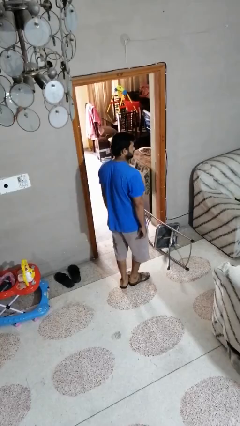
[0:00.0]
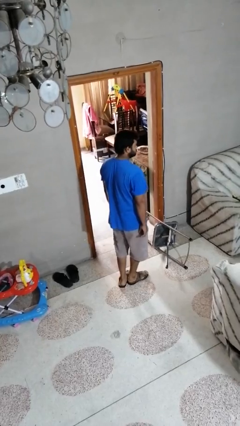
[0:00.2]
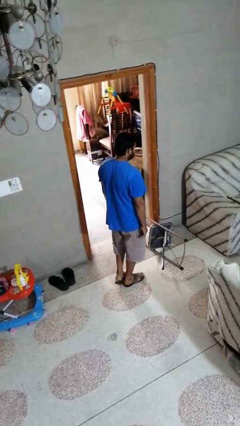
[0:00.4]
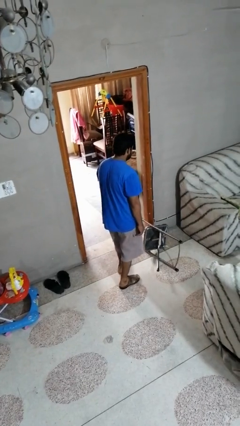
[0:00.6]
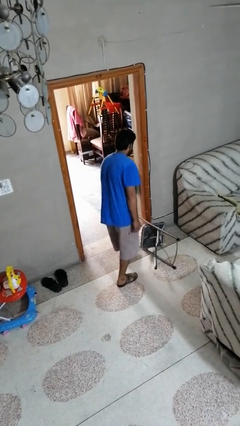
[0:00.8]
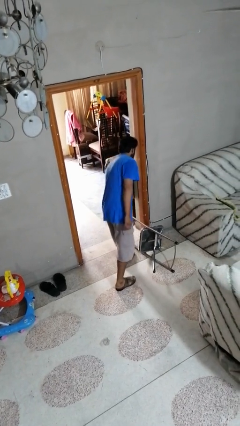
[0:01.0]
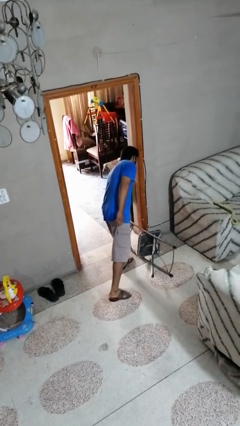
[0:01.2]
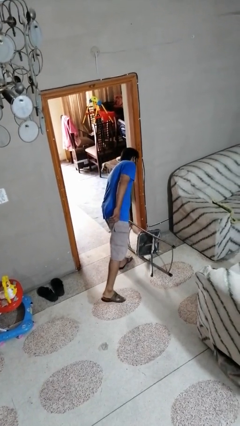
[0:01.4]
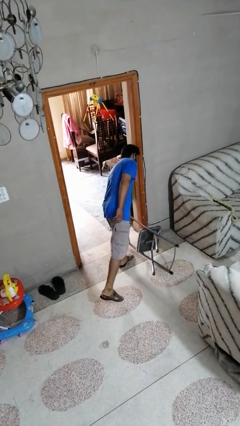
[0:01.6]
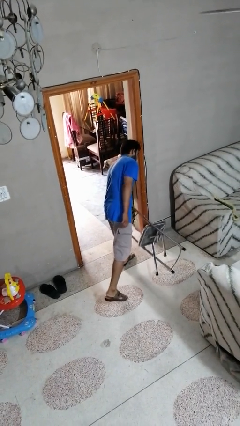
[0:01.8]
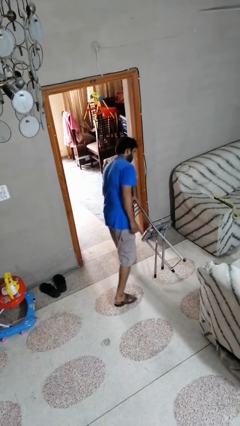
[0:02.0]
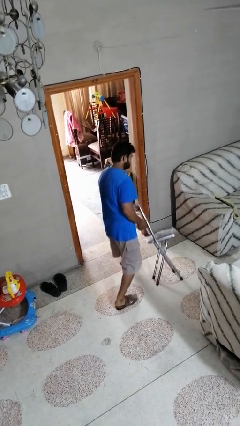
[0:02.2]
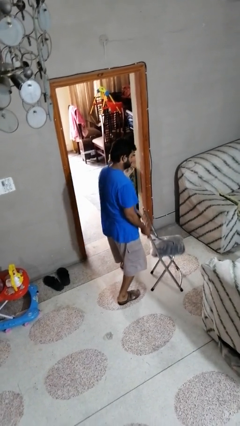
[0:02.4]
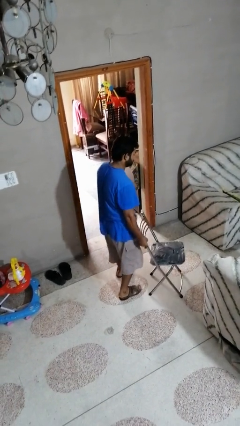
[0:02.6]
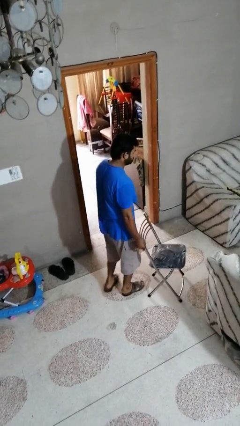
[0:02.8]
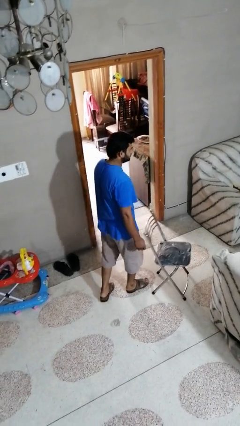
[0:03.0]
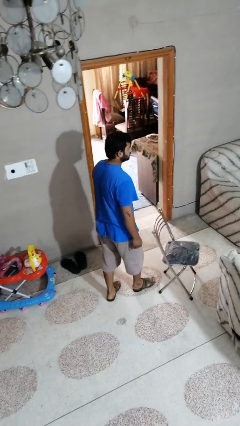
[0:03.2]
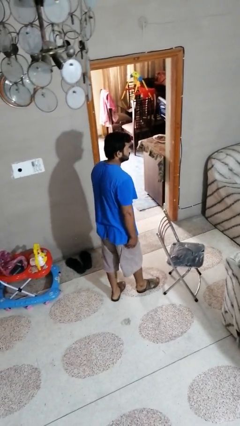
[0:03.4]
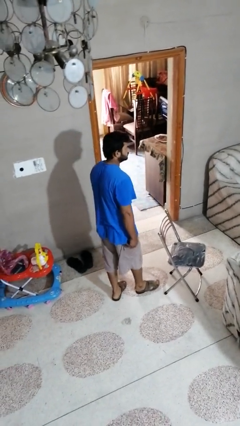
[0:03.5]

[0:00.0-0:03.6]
person sets upright furniture

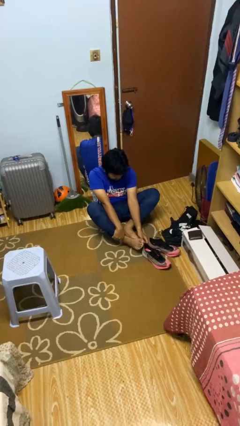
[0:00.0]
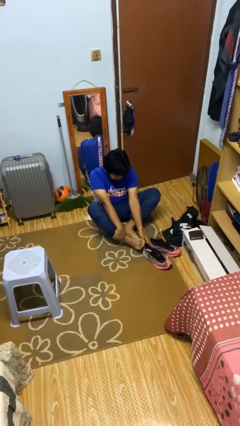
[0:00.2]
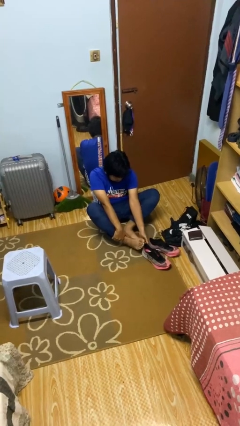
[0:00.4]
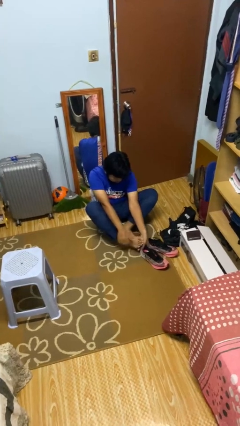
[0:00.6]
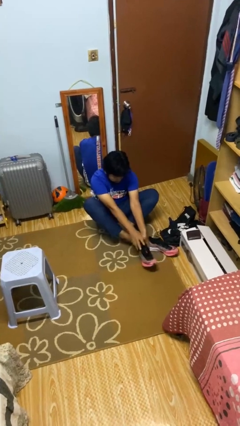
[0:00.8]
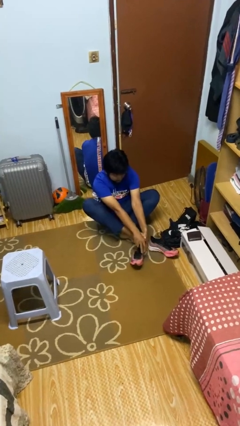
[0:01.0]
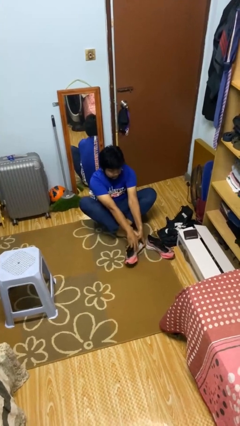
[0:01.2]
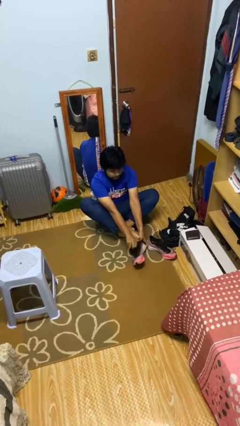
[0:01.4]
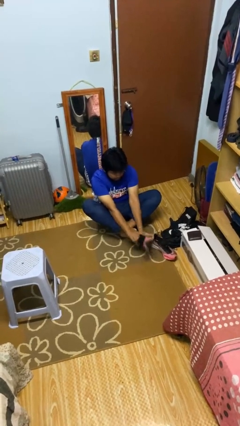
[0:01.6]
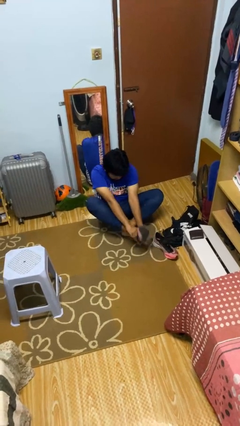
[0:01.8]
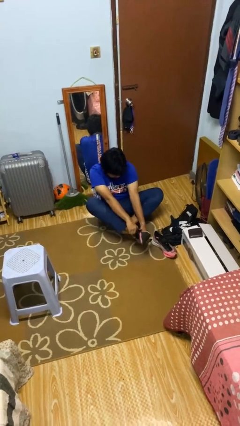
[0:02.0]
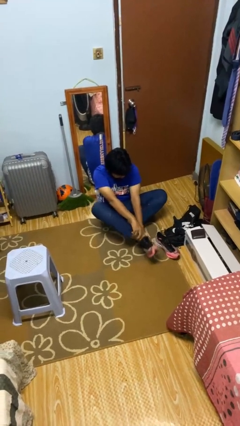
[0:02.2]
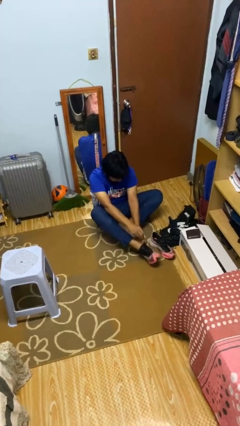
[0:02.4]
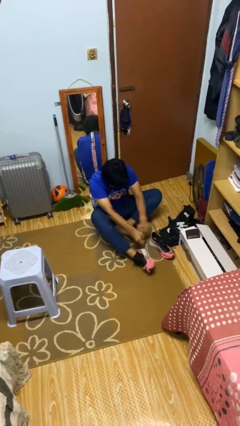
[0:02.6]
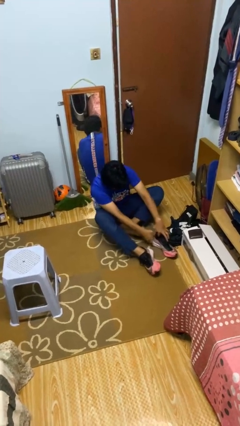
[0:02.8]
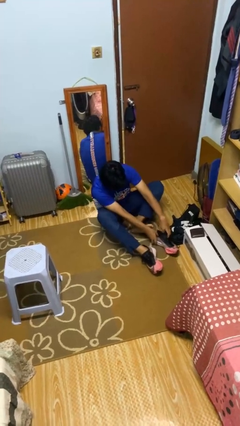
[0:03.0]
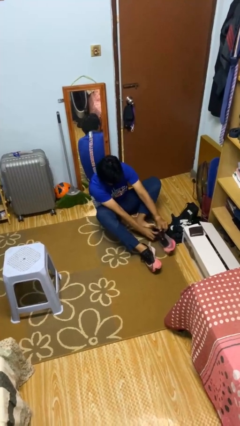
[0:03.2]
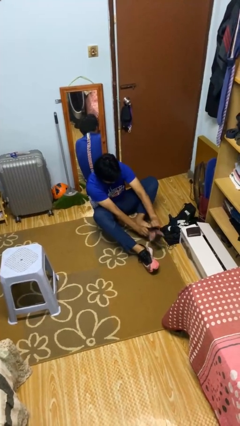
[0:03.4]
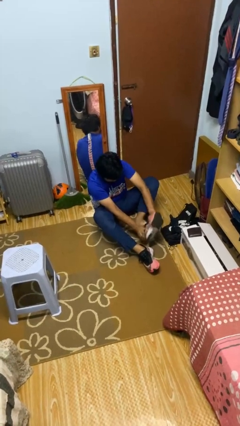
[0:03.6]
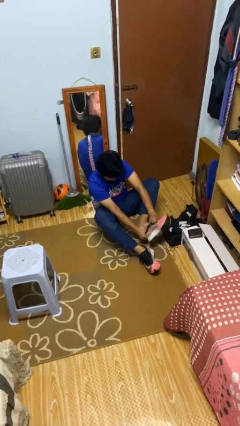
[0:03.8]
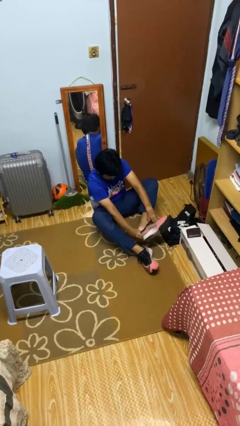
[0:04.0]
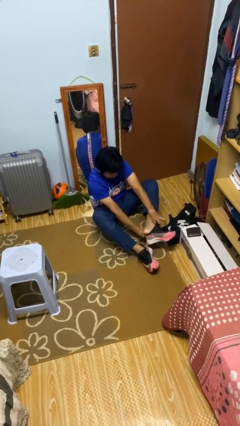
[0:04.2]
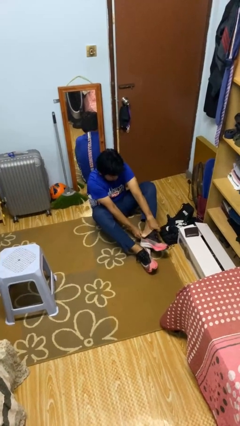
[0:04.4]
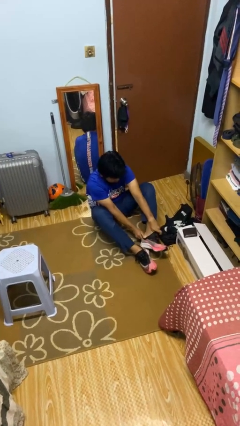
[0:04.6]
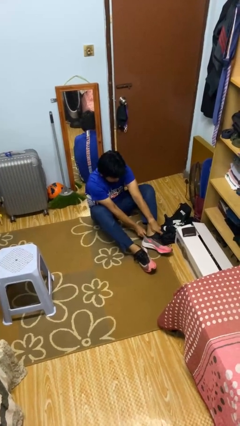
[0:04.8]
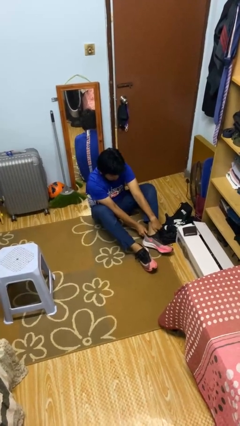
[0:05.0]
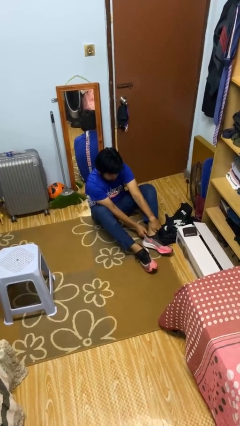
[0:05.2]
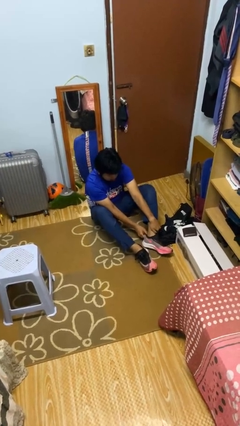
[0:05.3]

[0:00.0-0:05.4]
person puts on shoes

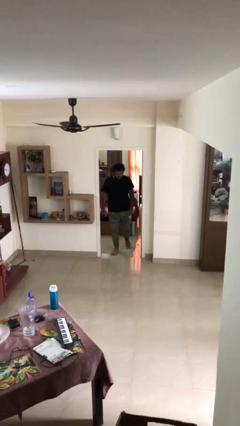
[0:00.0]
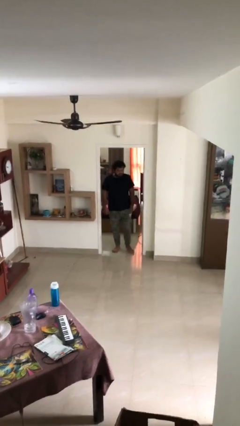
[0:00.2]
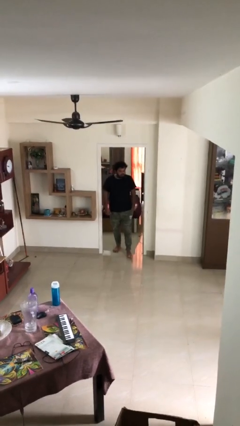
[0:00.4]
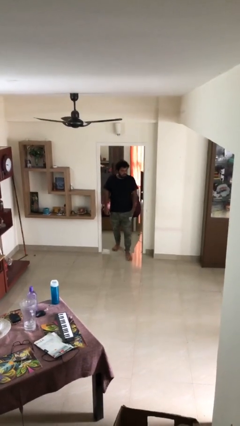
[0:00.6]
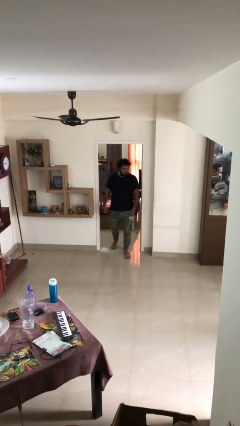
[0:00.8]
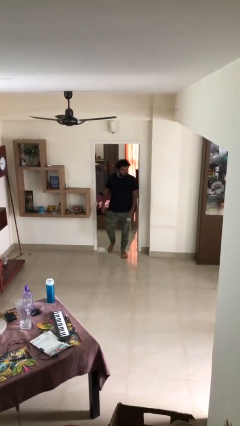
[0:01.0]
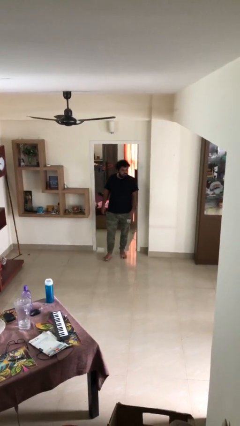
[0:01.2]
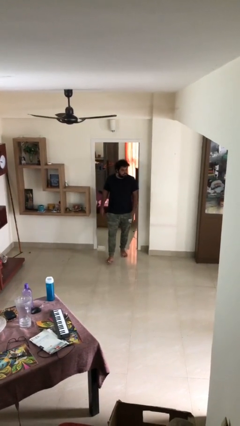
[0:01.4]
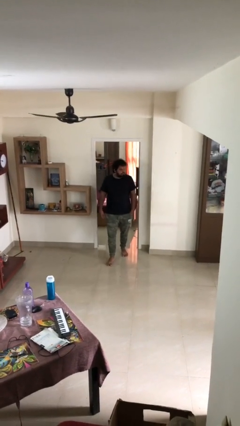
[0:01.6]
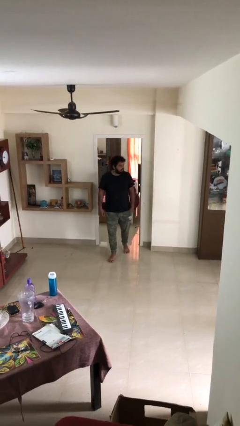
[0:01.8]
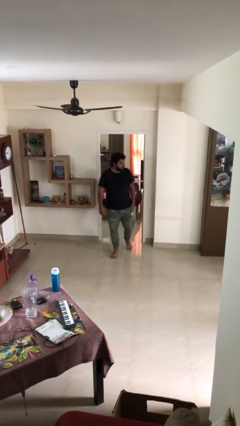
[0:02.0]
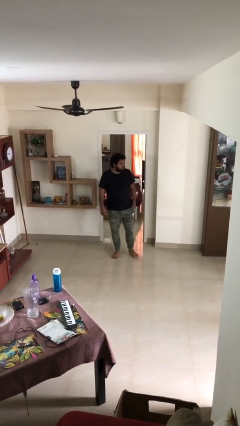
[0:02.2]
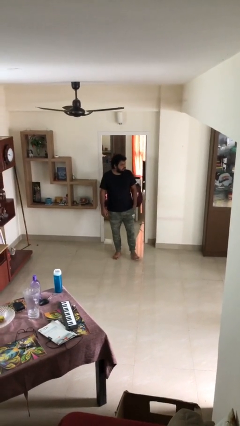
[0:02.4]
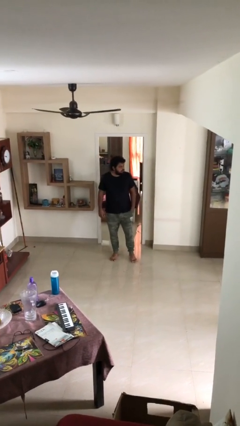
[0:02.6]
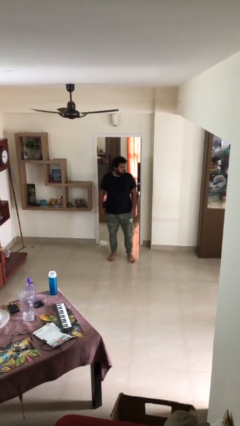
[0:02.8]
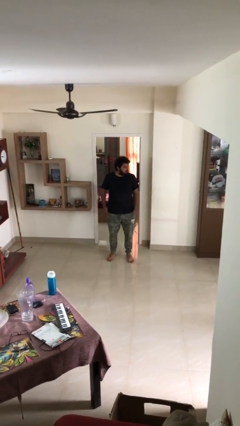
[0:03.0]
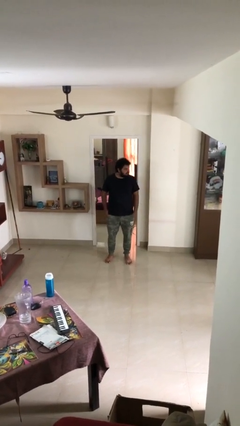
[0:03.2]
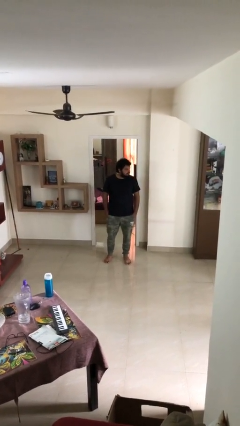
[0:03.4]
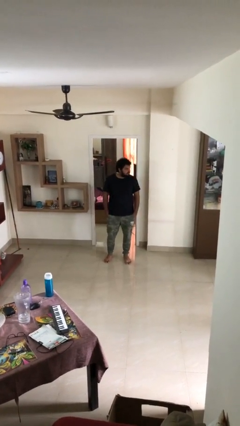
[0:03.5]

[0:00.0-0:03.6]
person enters scene through structure

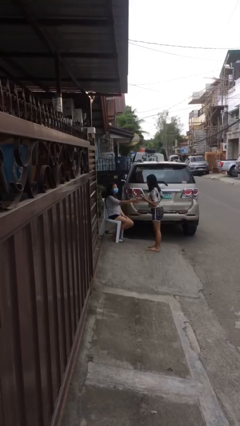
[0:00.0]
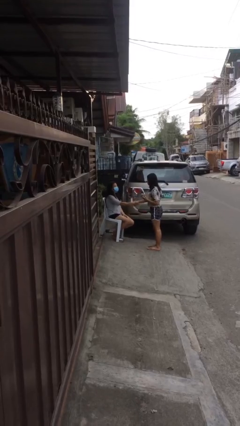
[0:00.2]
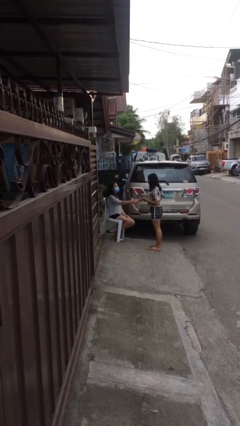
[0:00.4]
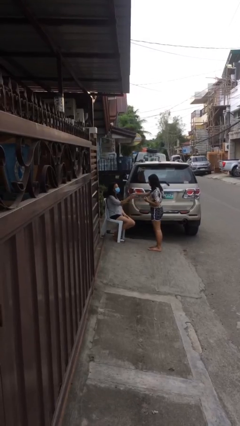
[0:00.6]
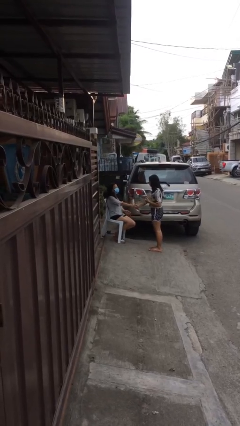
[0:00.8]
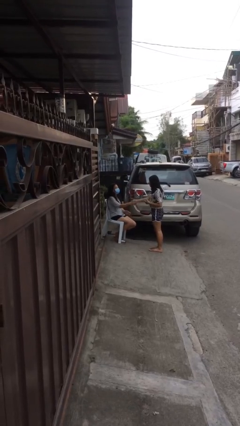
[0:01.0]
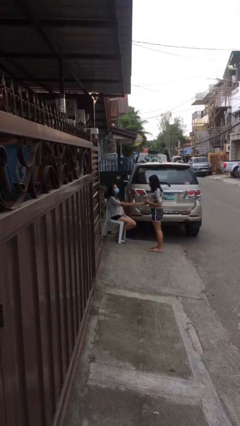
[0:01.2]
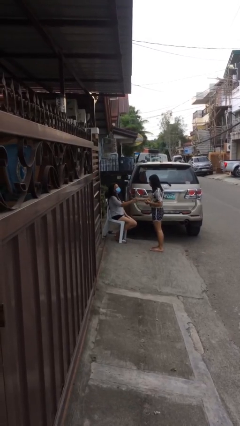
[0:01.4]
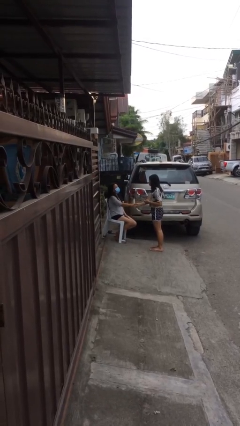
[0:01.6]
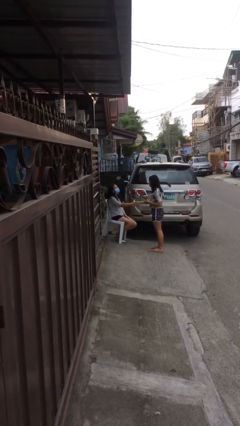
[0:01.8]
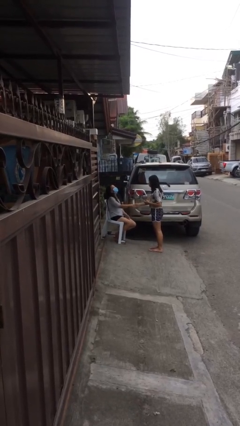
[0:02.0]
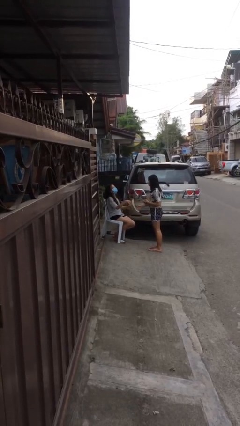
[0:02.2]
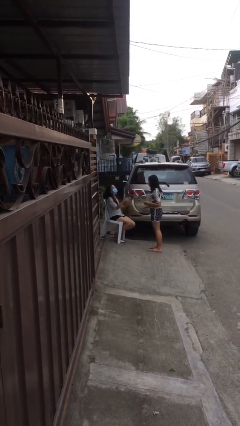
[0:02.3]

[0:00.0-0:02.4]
person shakes hand

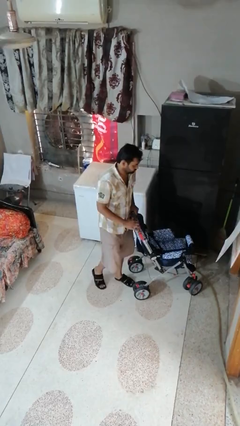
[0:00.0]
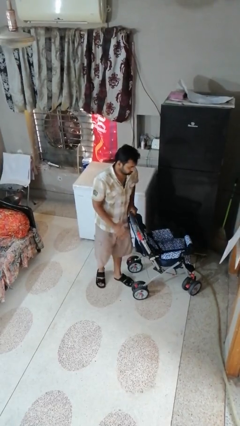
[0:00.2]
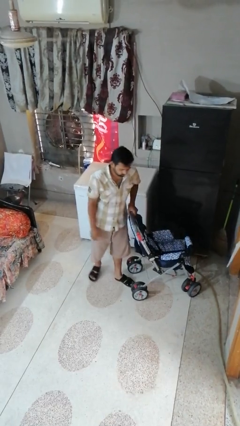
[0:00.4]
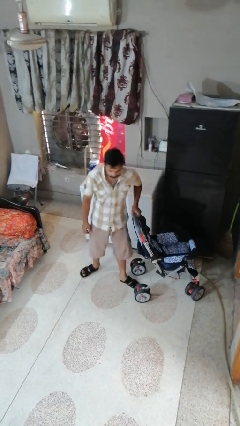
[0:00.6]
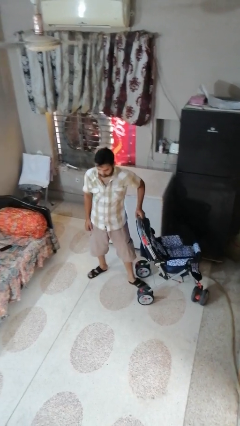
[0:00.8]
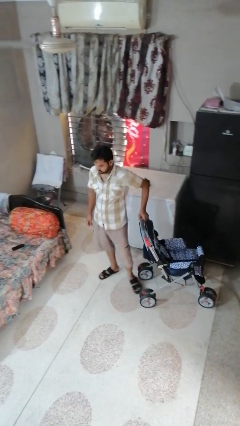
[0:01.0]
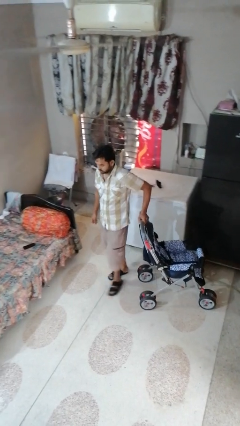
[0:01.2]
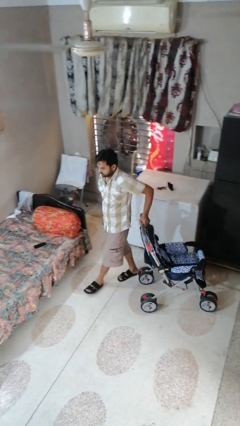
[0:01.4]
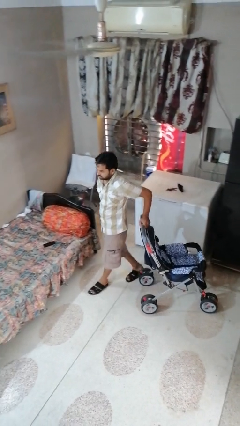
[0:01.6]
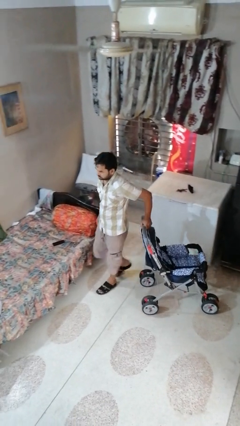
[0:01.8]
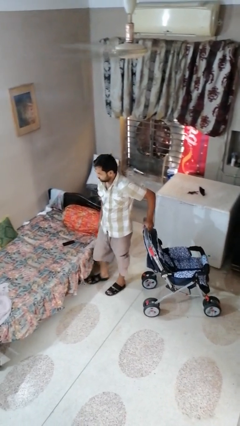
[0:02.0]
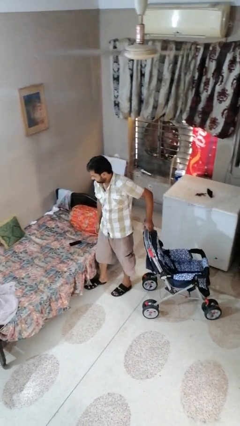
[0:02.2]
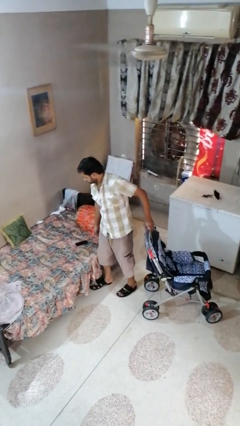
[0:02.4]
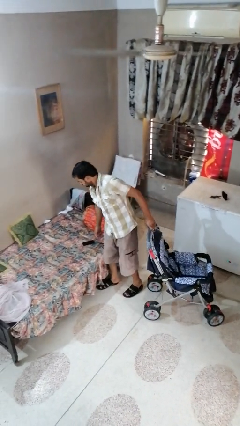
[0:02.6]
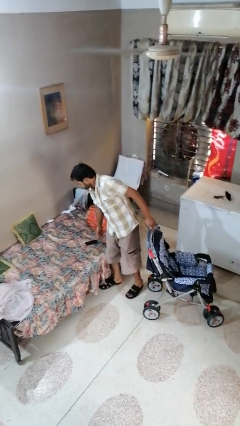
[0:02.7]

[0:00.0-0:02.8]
person pulls wheeled cart
